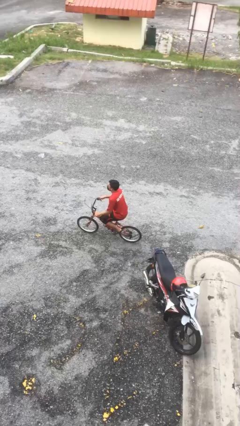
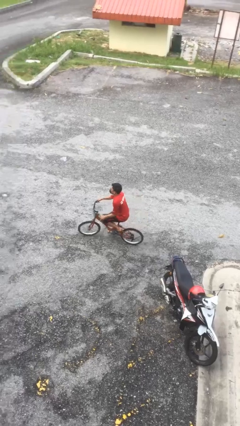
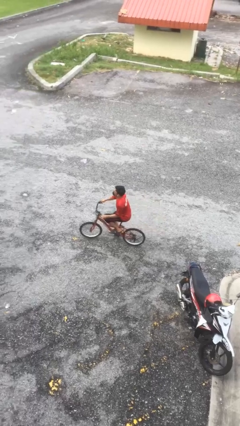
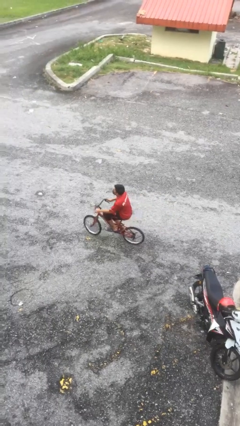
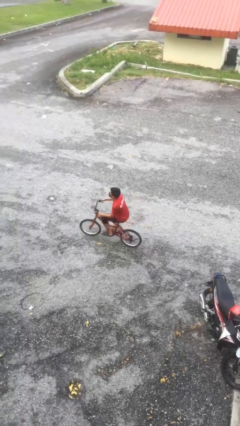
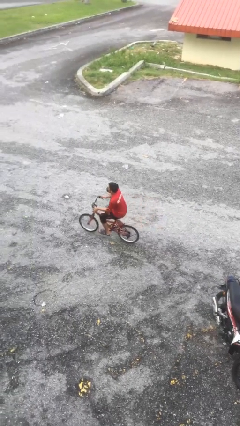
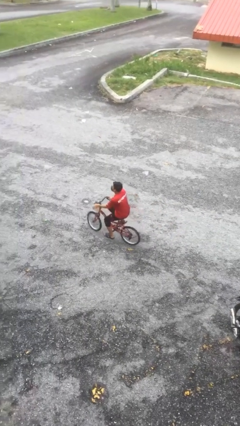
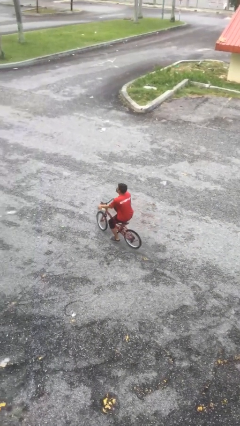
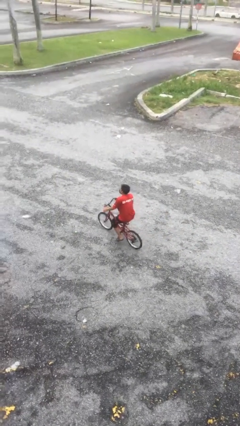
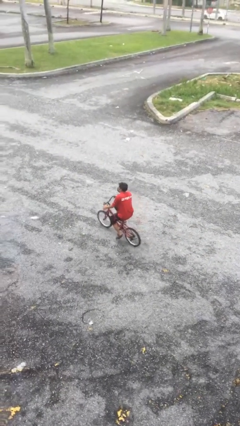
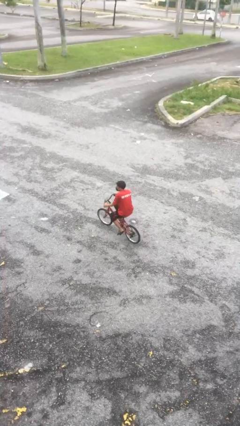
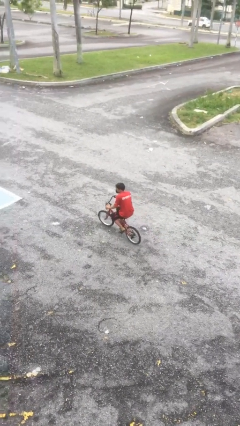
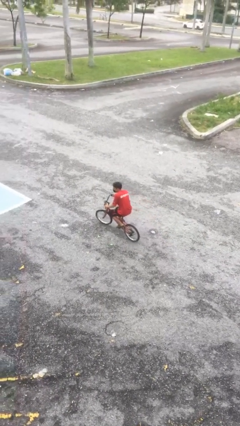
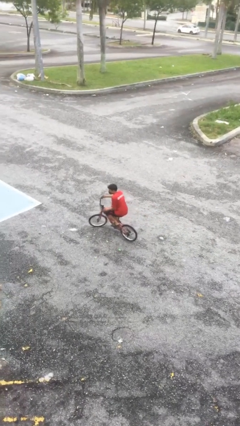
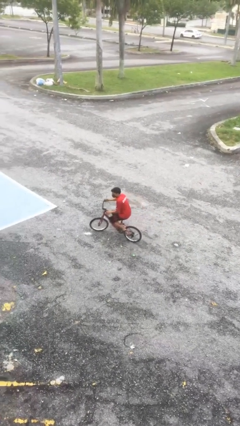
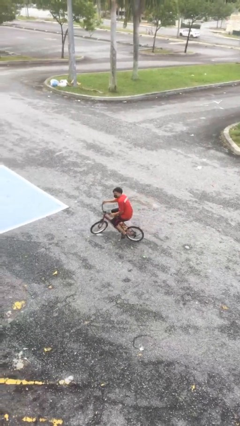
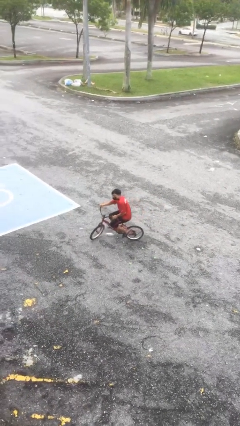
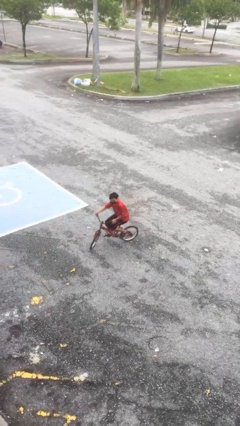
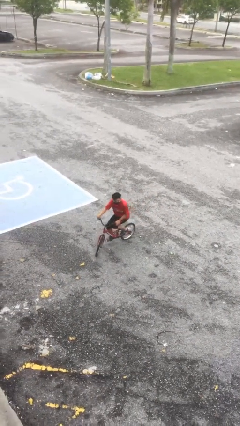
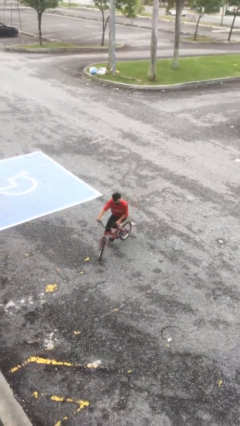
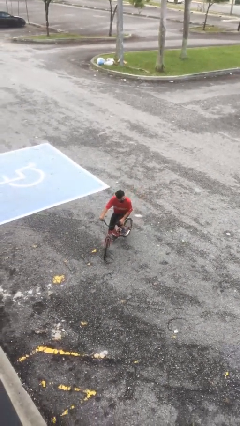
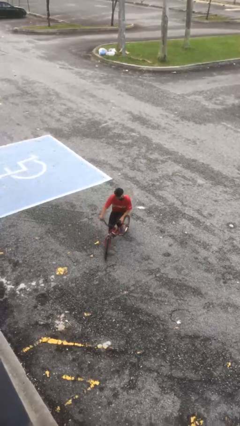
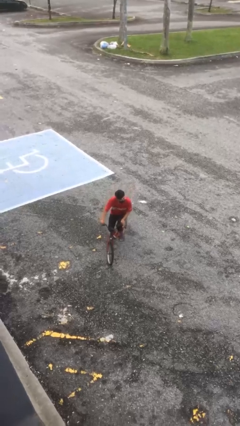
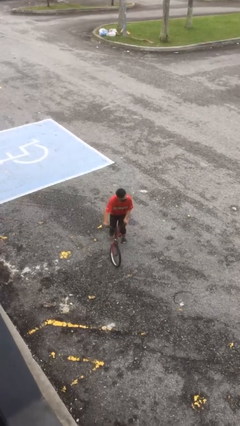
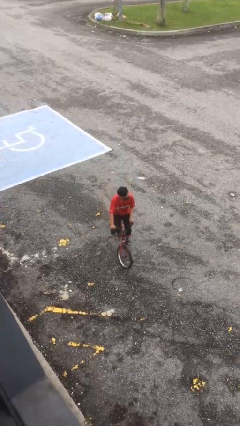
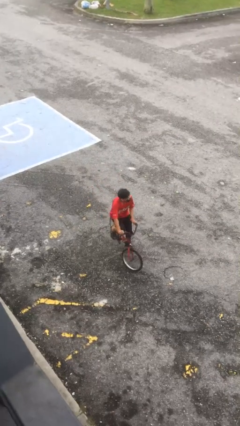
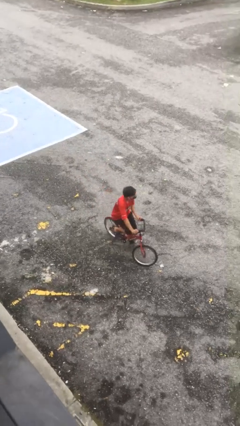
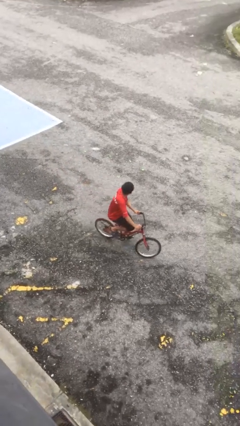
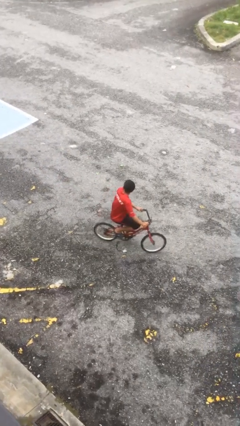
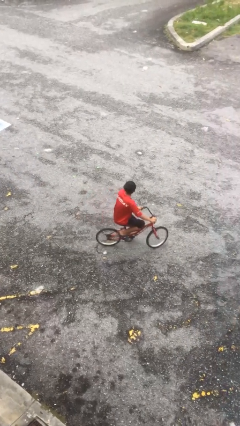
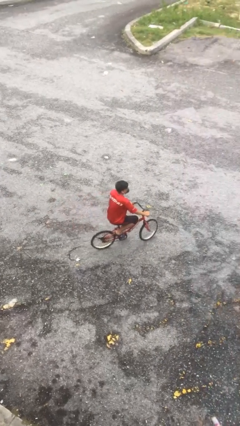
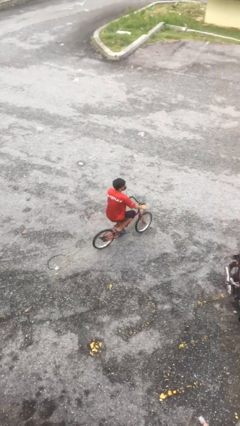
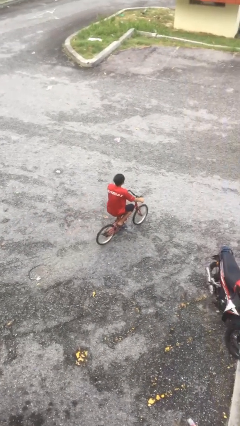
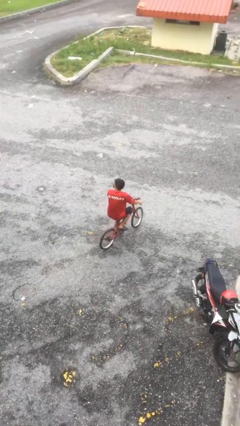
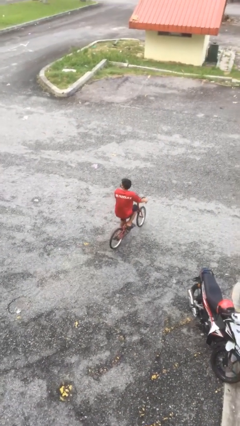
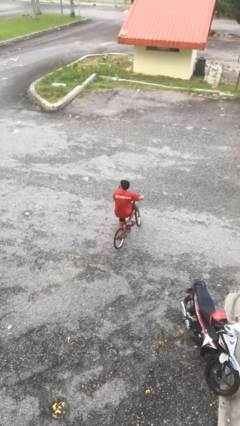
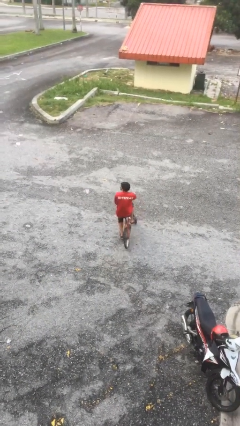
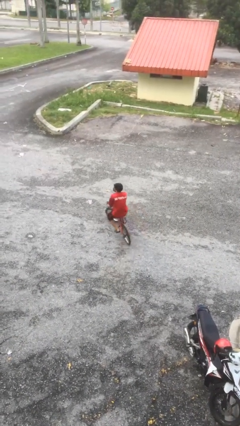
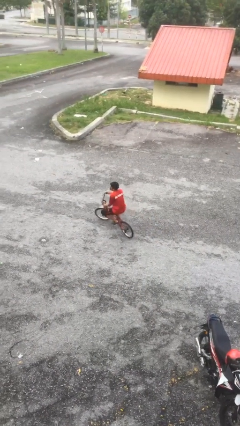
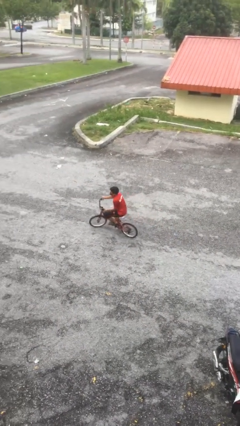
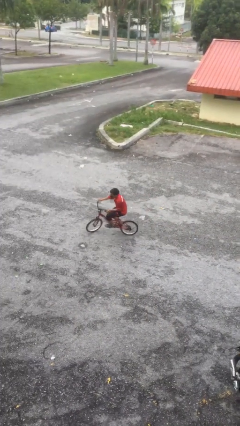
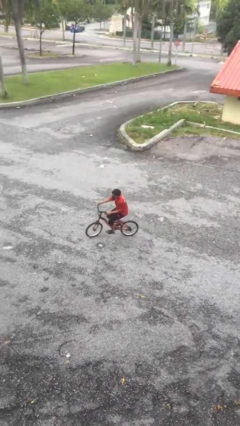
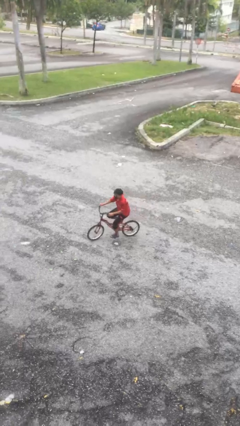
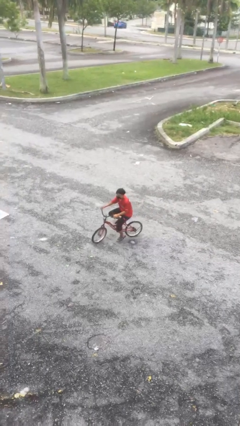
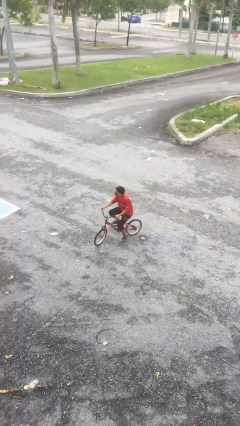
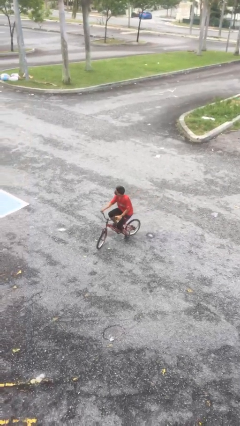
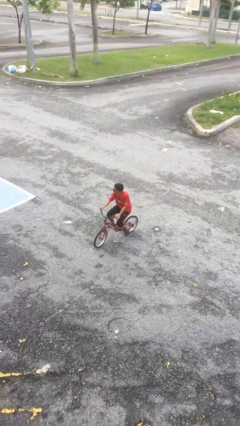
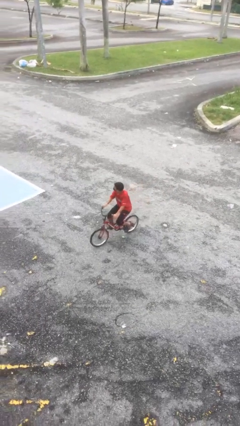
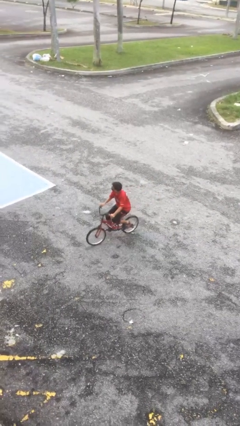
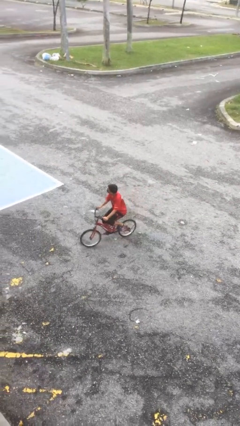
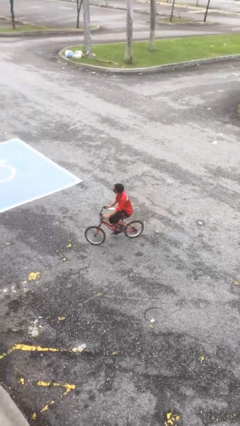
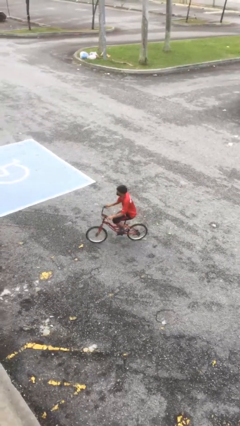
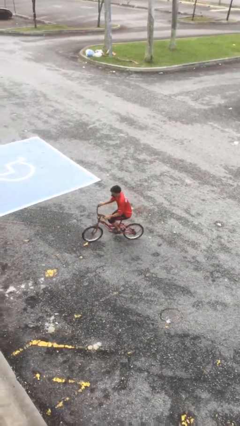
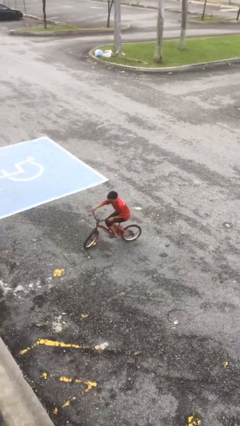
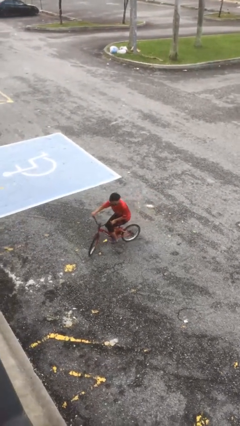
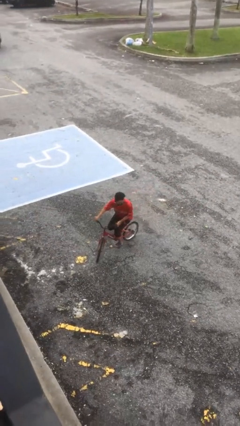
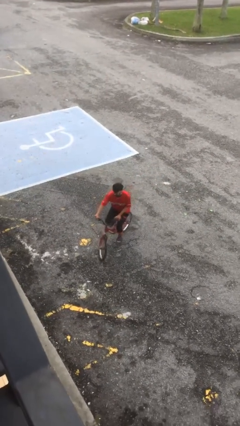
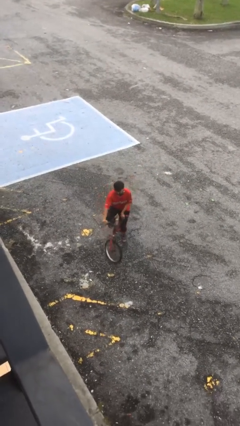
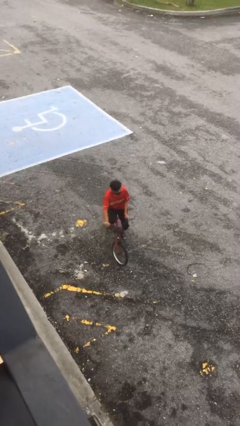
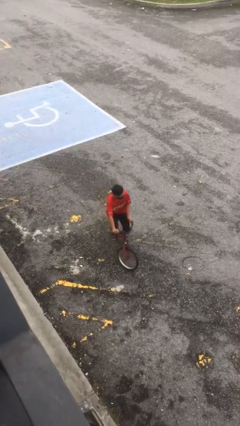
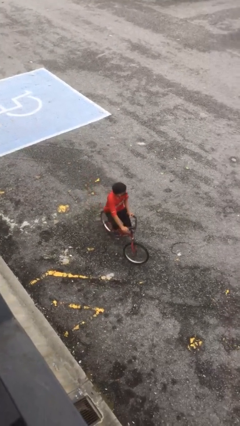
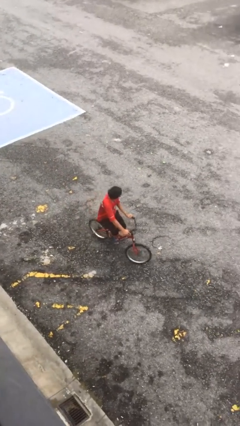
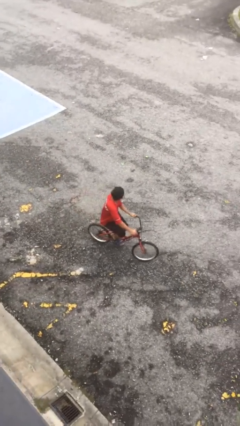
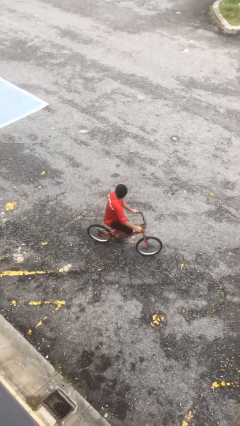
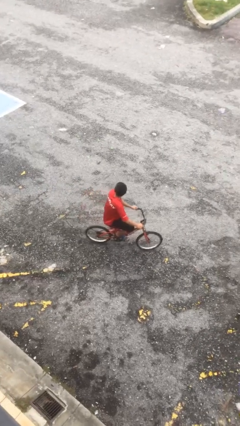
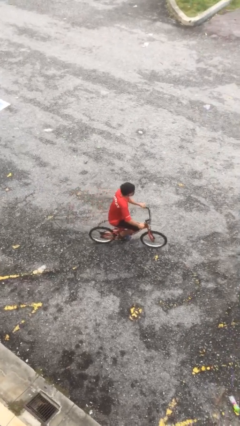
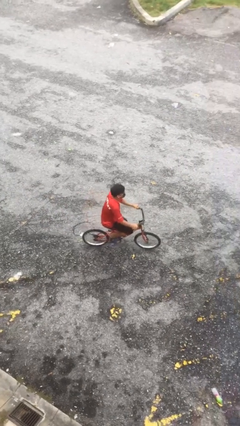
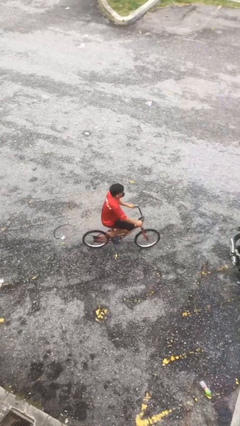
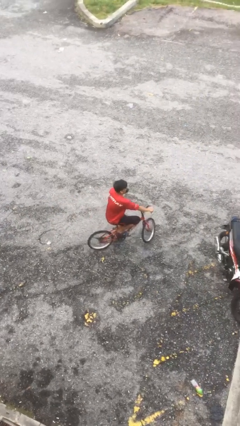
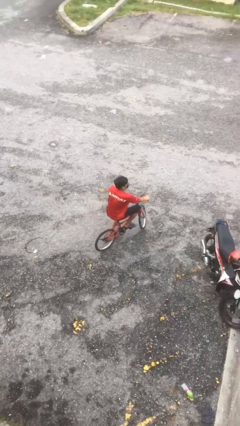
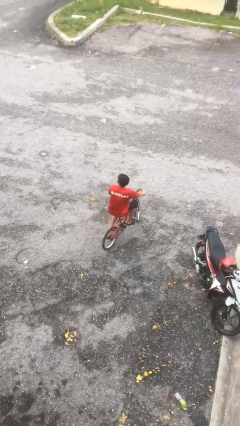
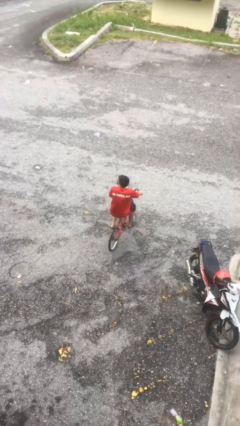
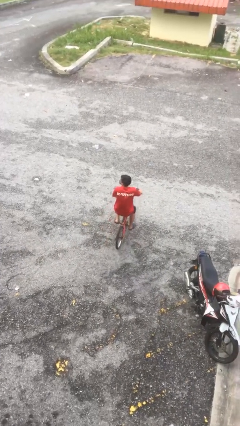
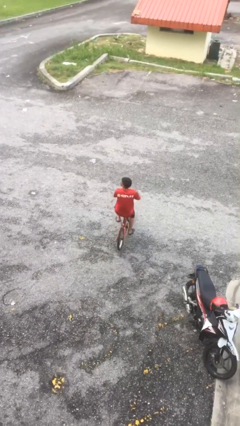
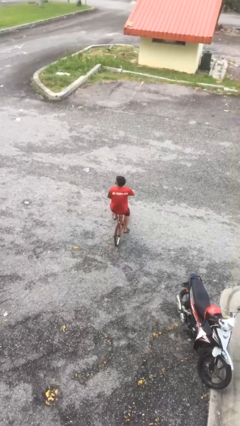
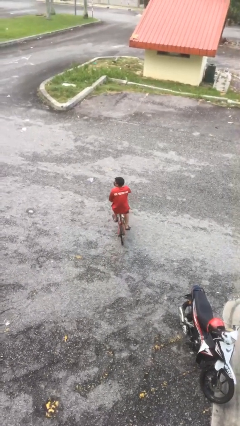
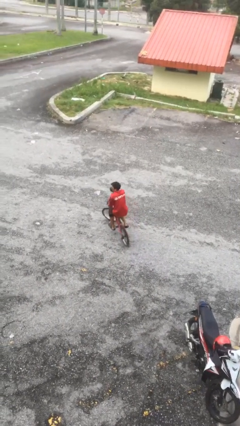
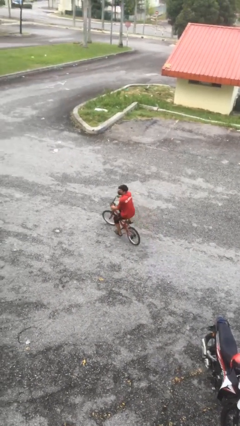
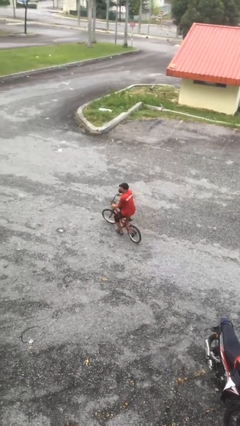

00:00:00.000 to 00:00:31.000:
person rides bicycle

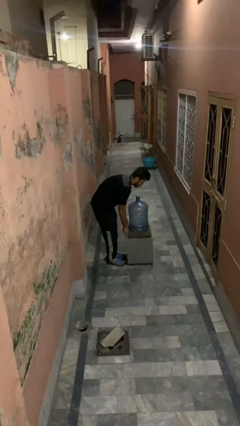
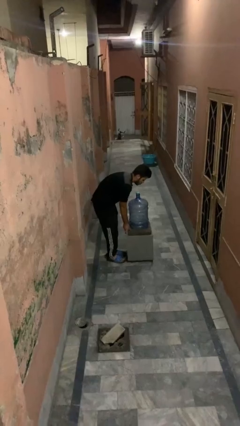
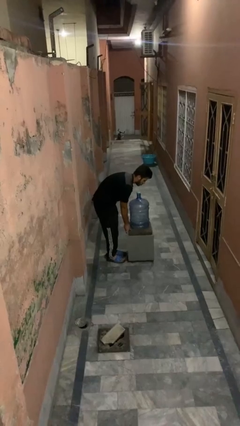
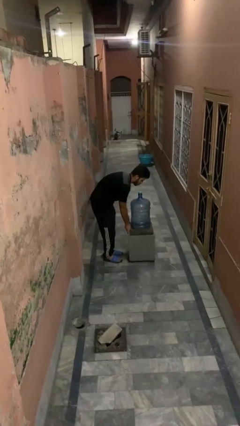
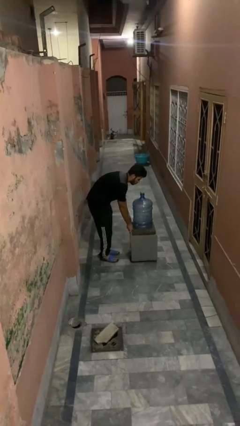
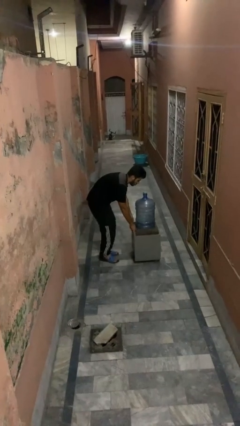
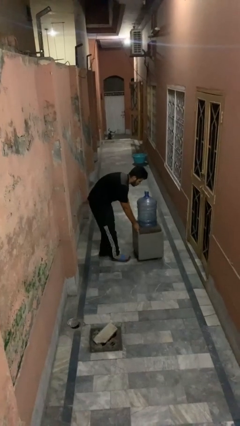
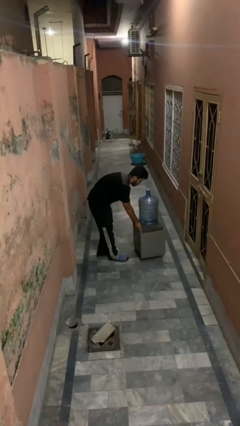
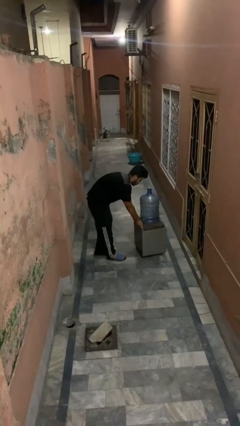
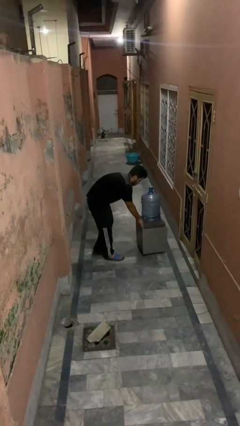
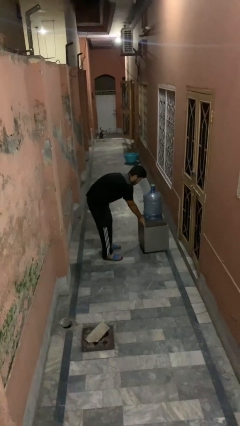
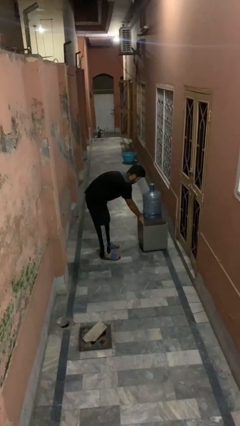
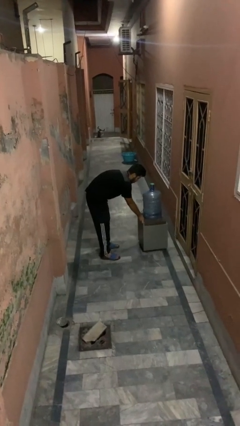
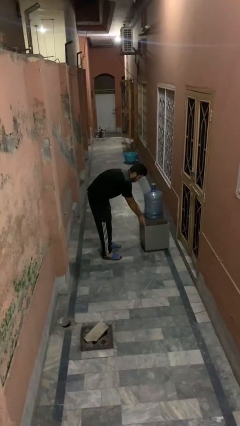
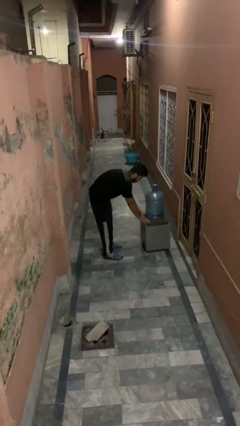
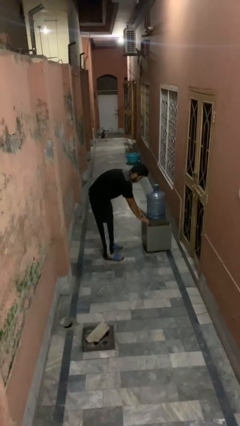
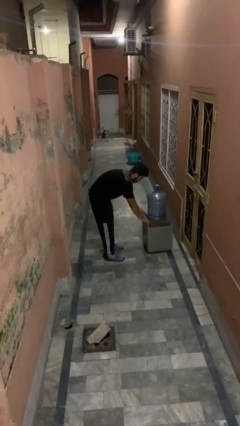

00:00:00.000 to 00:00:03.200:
person pushes wheeled cart
